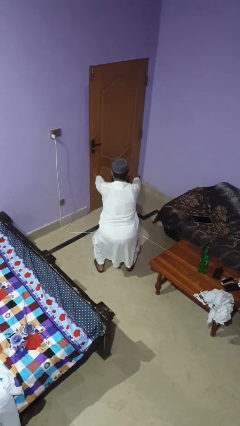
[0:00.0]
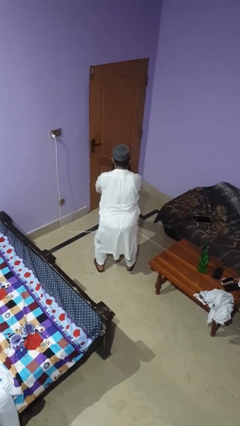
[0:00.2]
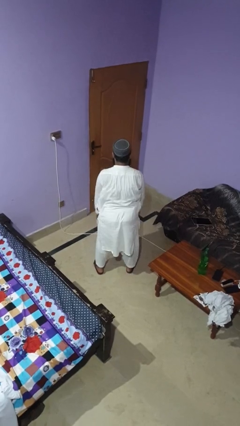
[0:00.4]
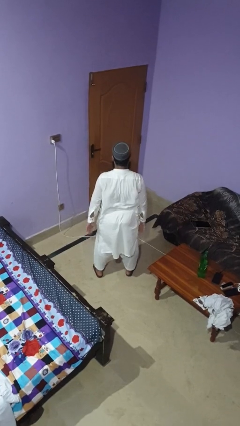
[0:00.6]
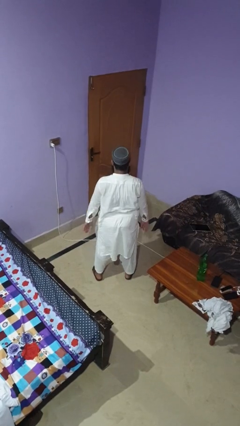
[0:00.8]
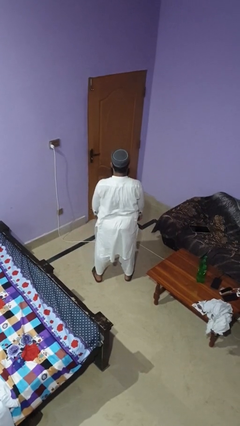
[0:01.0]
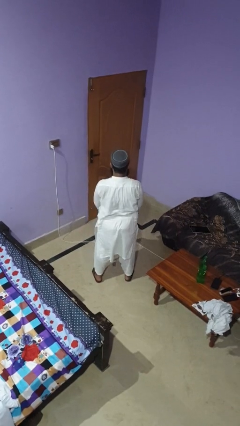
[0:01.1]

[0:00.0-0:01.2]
person stands up

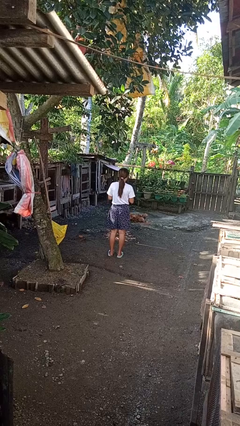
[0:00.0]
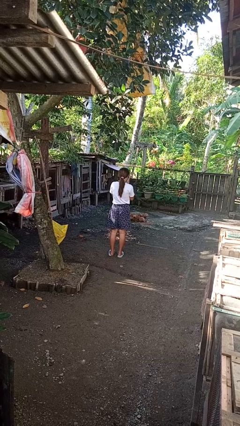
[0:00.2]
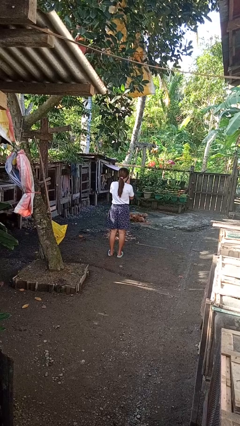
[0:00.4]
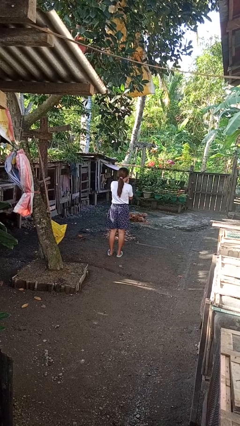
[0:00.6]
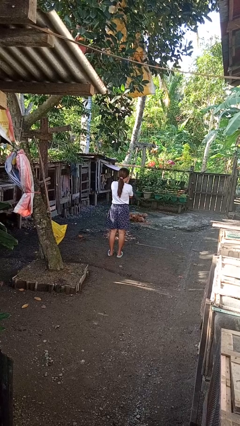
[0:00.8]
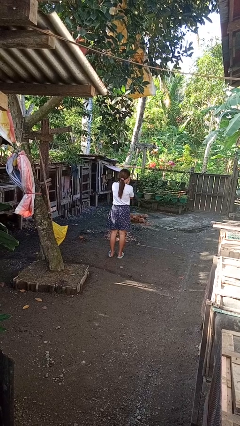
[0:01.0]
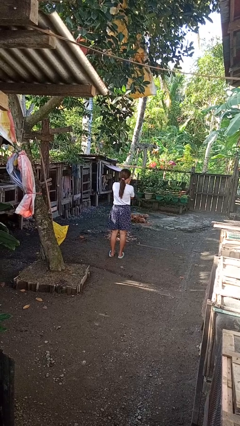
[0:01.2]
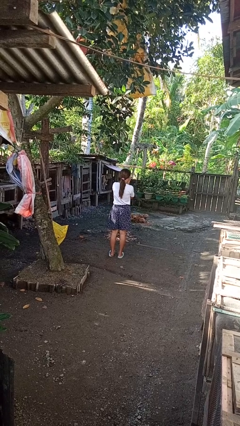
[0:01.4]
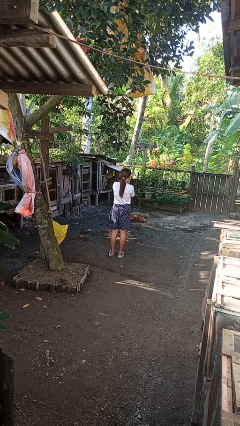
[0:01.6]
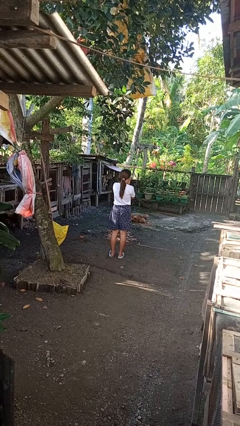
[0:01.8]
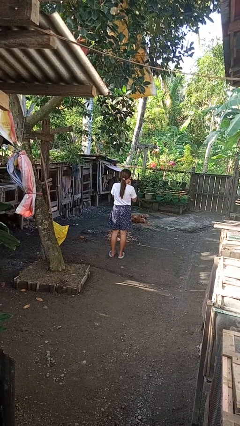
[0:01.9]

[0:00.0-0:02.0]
person blows into hands

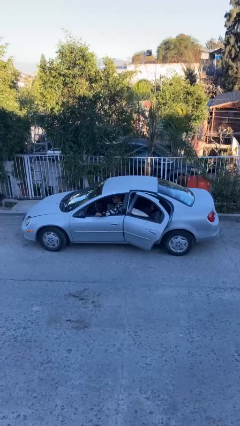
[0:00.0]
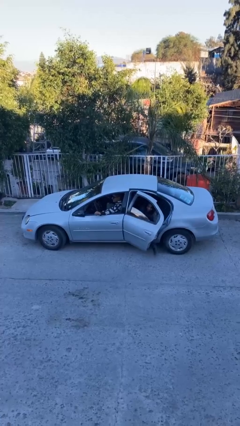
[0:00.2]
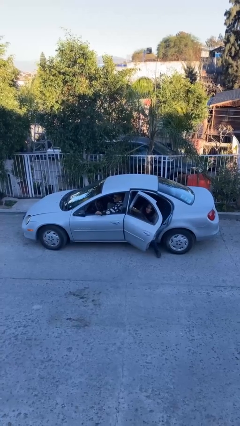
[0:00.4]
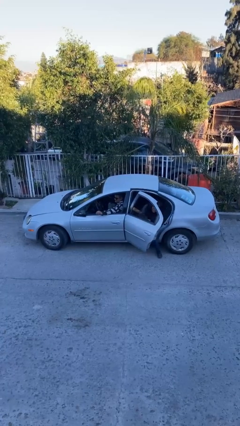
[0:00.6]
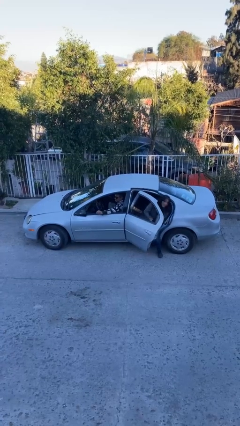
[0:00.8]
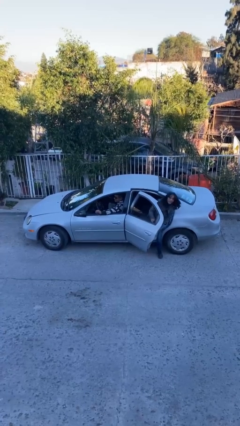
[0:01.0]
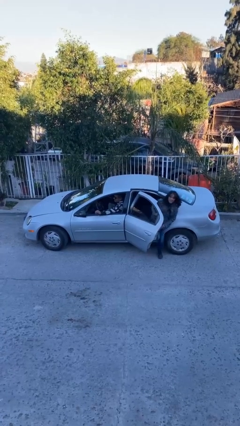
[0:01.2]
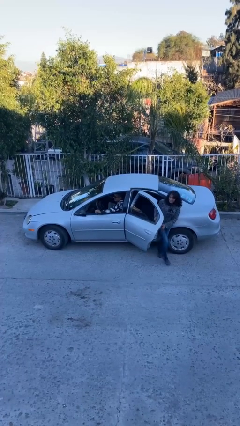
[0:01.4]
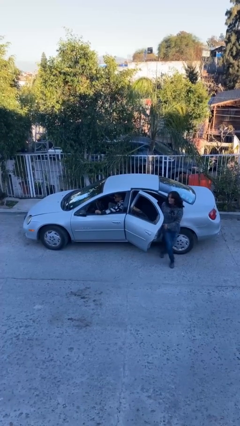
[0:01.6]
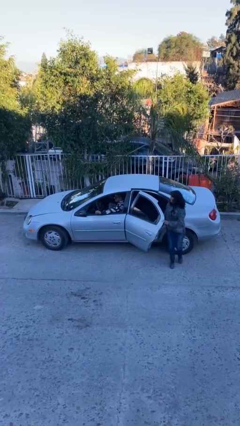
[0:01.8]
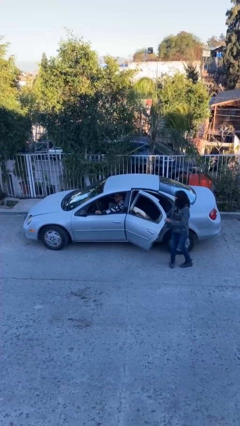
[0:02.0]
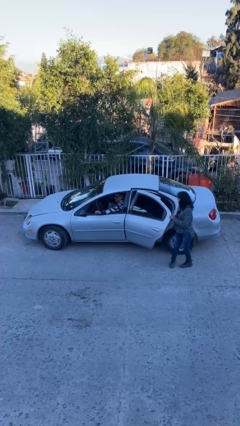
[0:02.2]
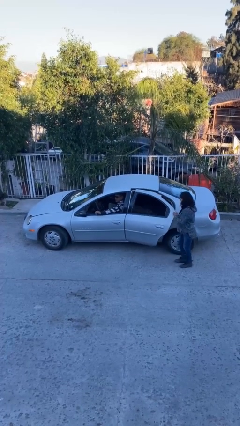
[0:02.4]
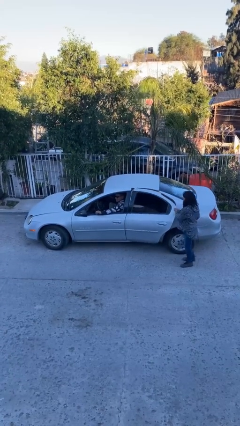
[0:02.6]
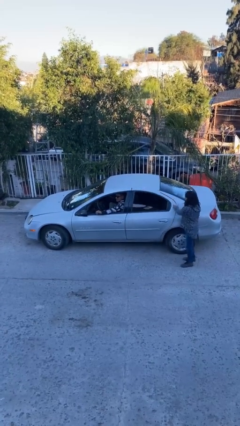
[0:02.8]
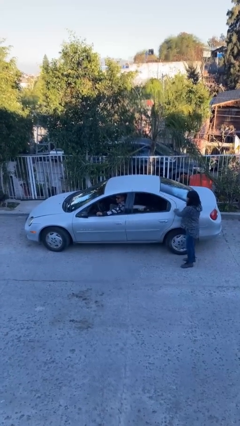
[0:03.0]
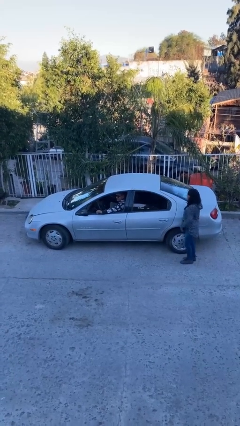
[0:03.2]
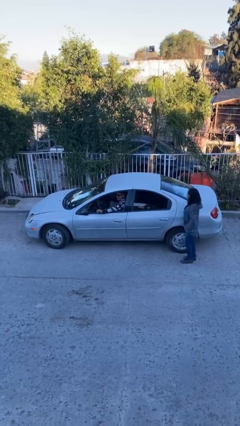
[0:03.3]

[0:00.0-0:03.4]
car drops off person

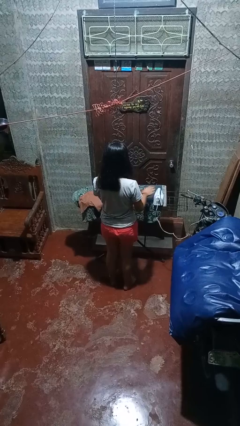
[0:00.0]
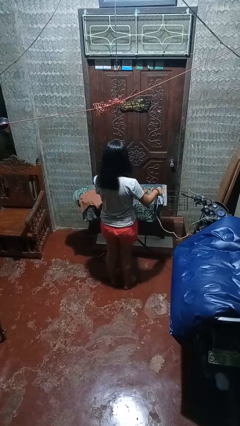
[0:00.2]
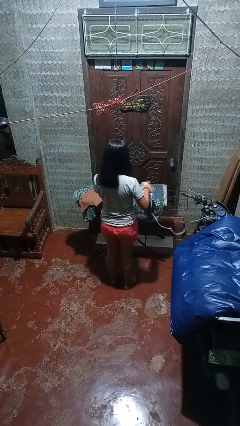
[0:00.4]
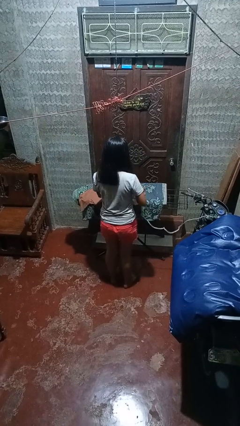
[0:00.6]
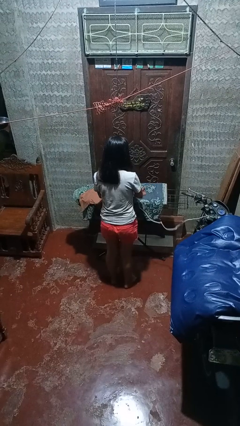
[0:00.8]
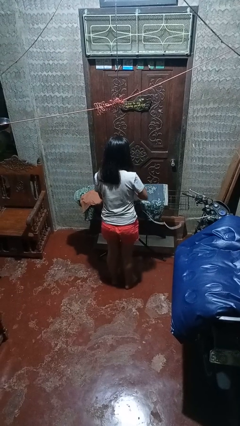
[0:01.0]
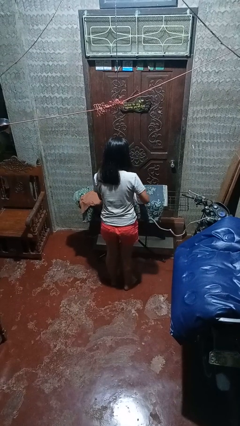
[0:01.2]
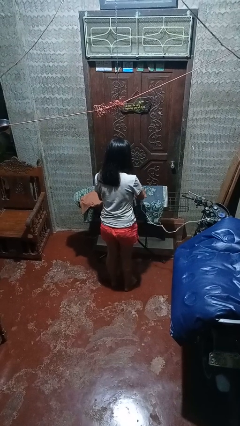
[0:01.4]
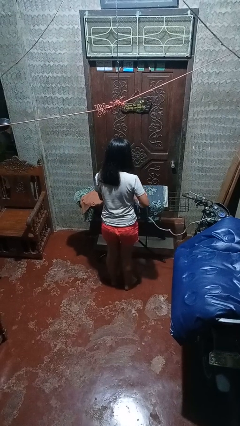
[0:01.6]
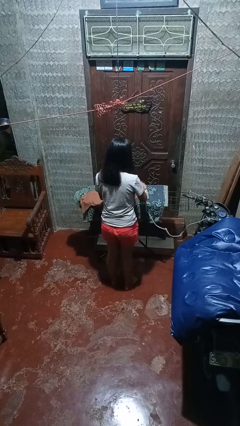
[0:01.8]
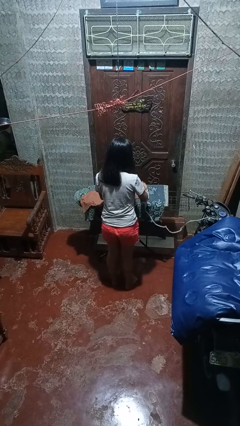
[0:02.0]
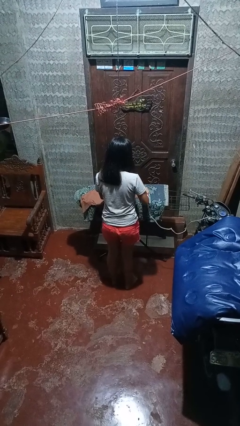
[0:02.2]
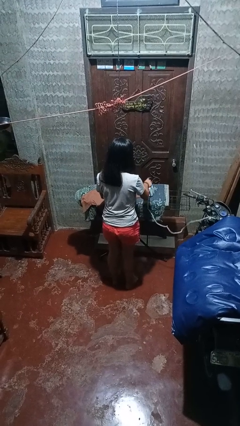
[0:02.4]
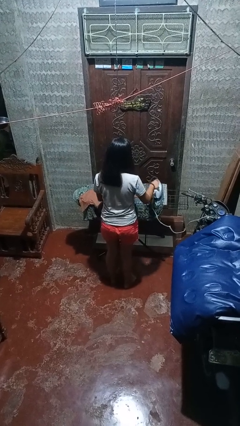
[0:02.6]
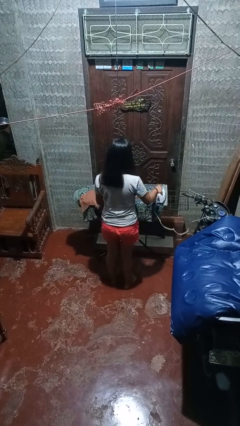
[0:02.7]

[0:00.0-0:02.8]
person irons clothes

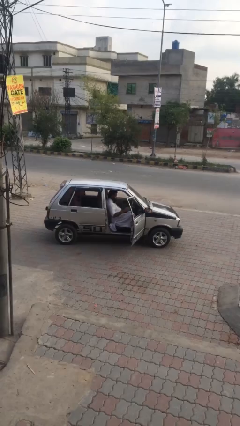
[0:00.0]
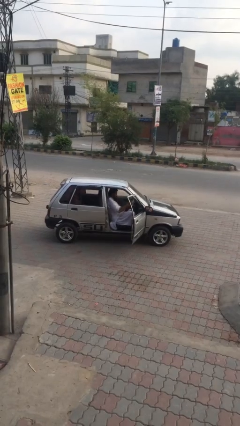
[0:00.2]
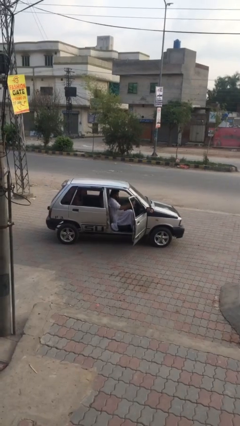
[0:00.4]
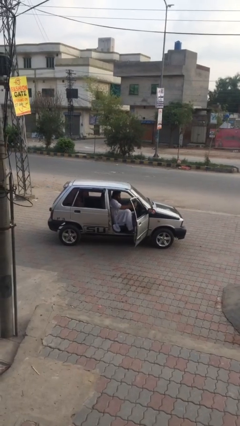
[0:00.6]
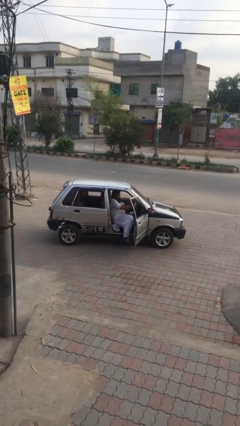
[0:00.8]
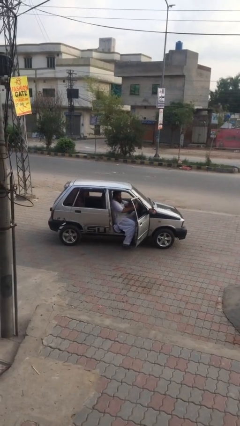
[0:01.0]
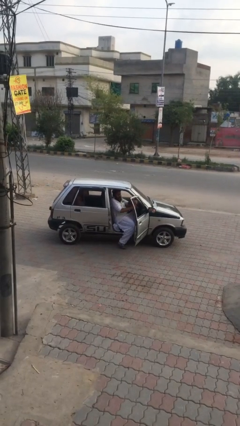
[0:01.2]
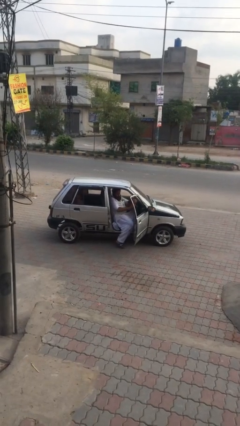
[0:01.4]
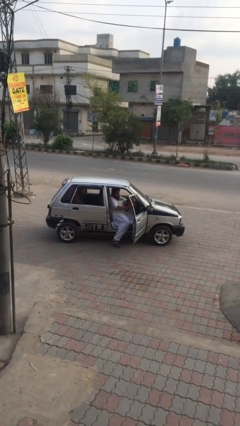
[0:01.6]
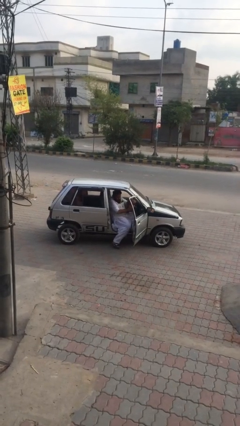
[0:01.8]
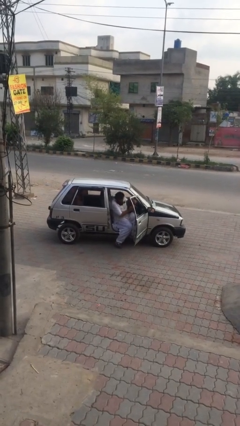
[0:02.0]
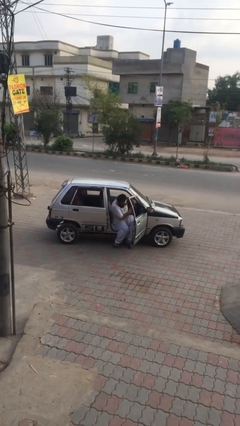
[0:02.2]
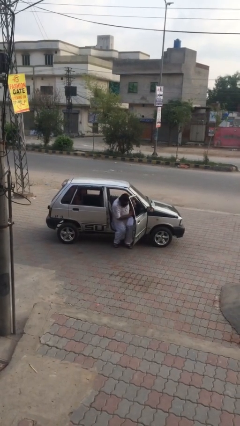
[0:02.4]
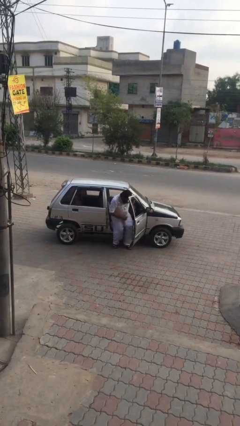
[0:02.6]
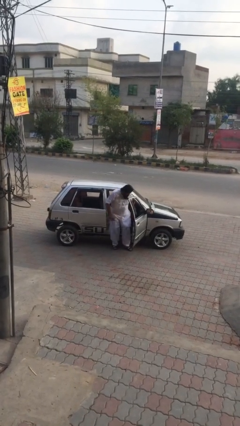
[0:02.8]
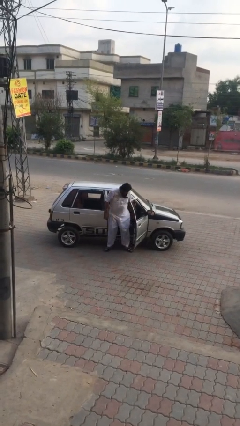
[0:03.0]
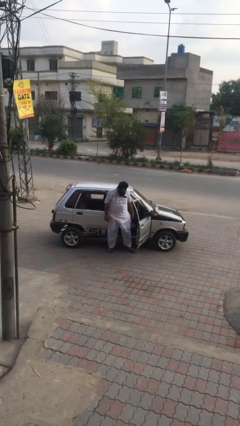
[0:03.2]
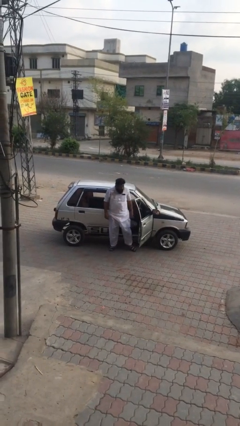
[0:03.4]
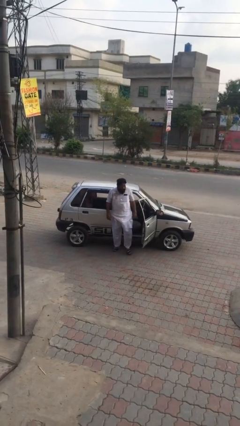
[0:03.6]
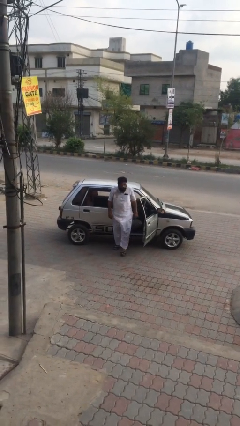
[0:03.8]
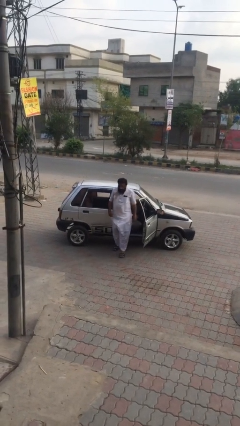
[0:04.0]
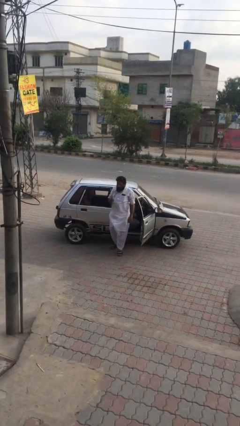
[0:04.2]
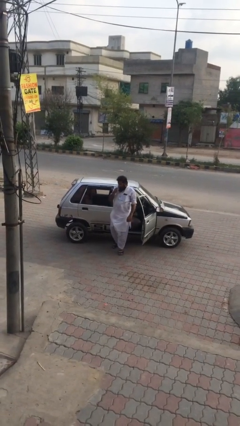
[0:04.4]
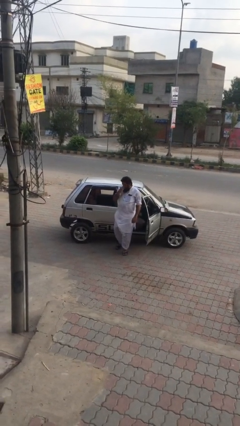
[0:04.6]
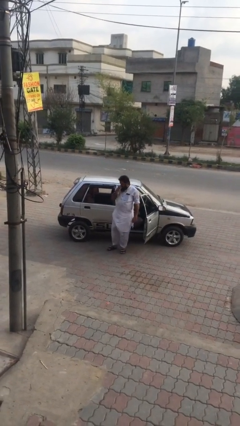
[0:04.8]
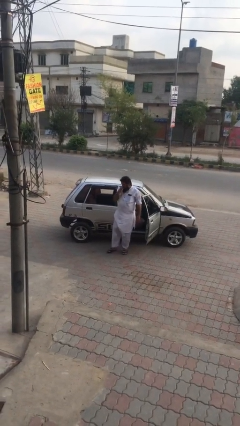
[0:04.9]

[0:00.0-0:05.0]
person exits car

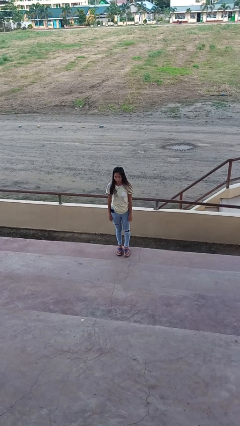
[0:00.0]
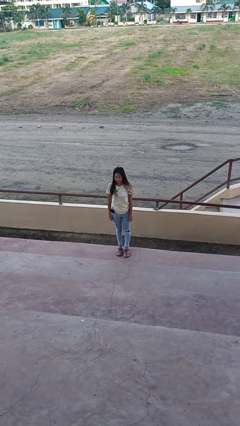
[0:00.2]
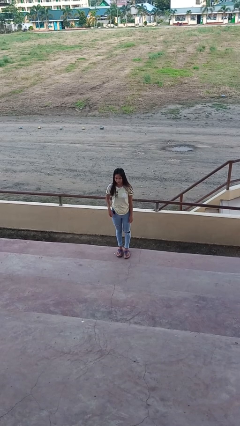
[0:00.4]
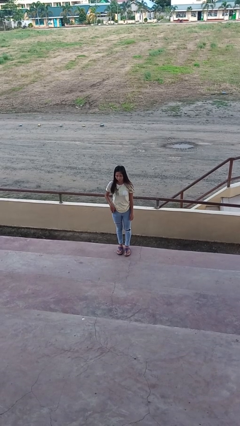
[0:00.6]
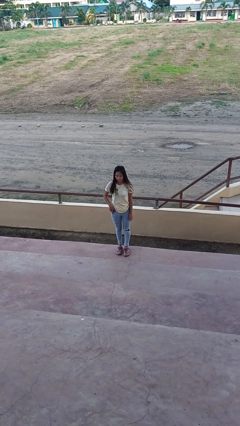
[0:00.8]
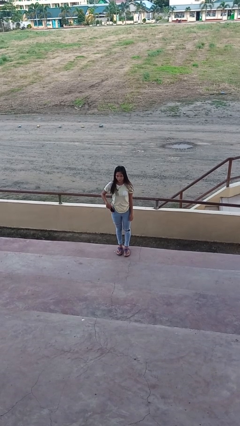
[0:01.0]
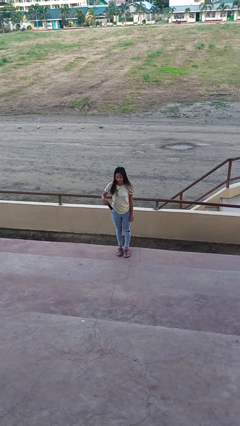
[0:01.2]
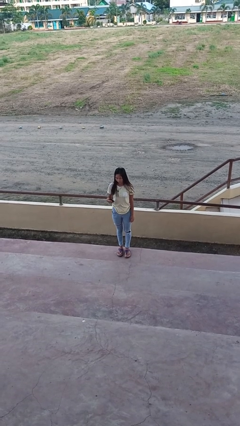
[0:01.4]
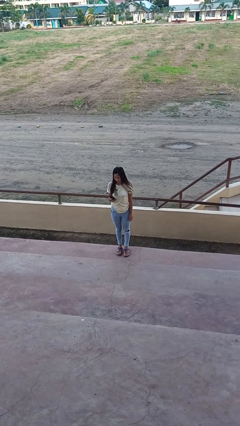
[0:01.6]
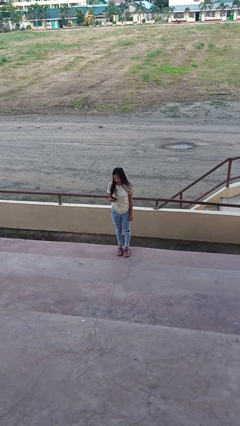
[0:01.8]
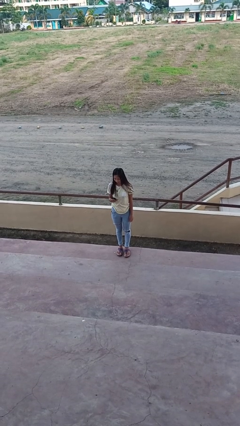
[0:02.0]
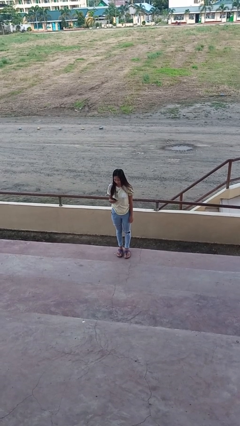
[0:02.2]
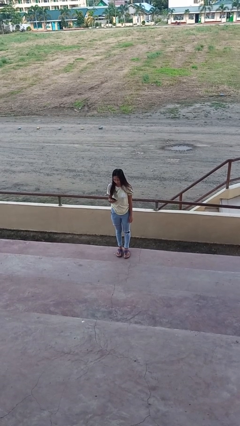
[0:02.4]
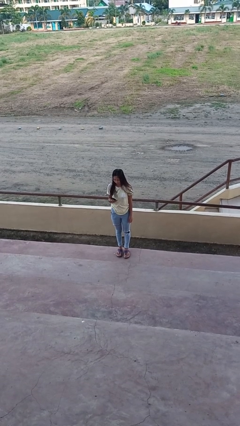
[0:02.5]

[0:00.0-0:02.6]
person takes phone from pocket

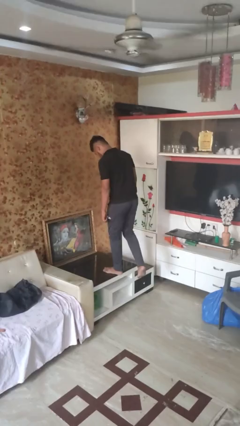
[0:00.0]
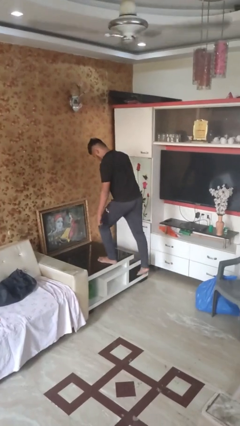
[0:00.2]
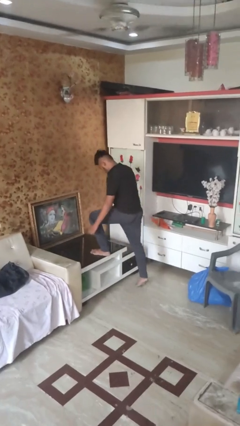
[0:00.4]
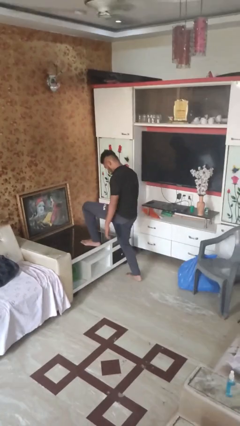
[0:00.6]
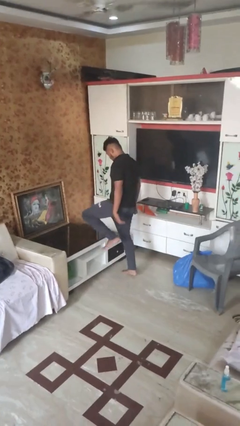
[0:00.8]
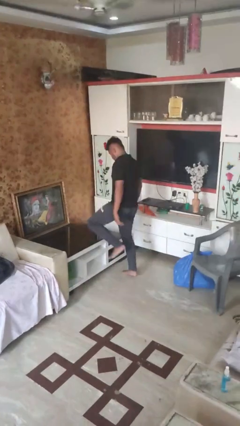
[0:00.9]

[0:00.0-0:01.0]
person climbs off table
